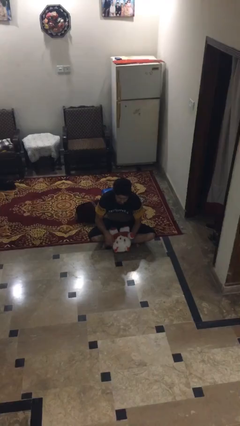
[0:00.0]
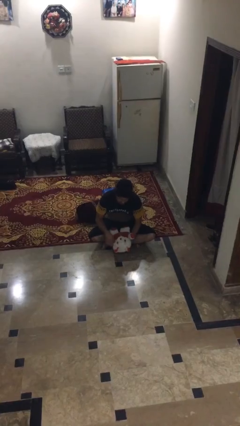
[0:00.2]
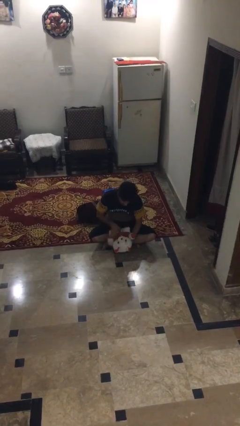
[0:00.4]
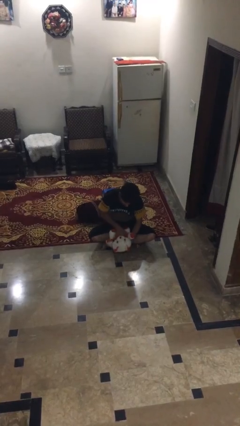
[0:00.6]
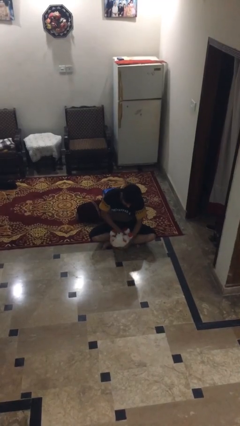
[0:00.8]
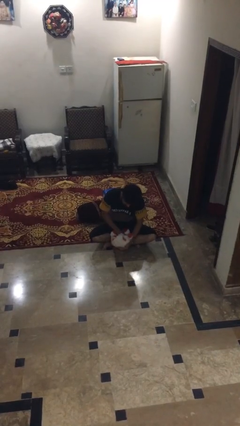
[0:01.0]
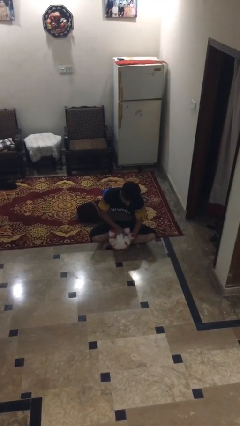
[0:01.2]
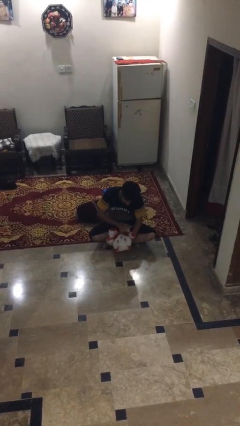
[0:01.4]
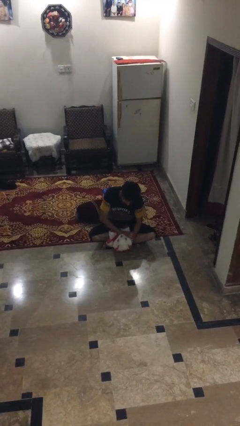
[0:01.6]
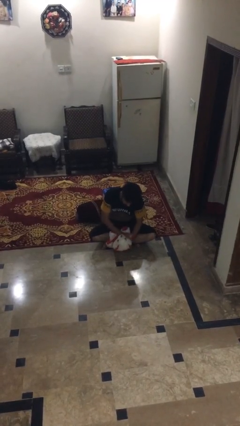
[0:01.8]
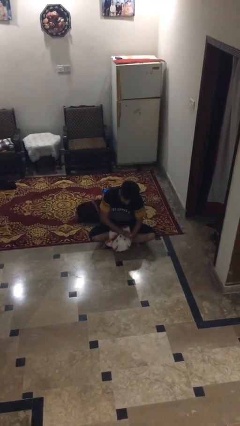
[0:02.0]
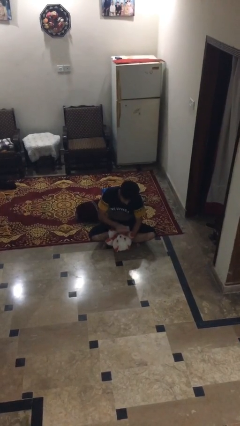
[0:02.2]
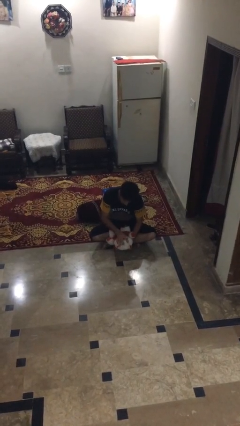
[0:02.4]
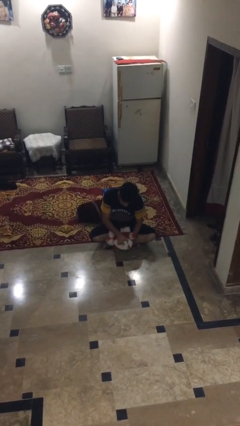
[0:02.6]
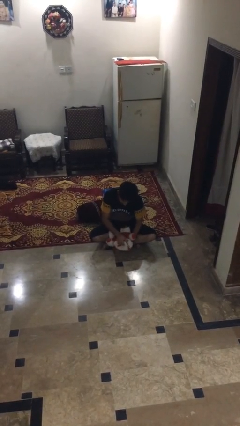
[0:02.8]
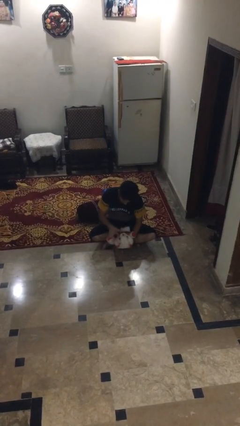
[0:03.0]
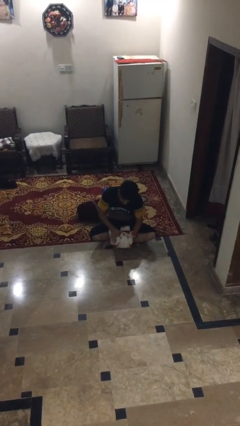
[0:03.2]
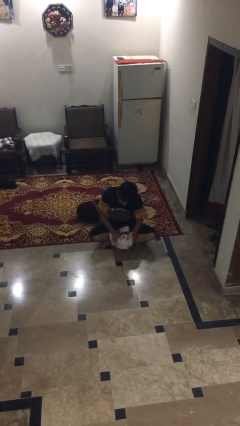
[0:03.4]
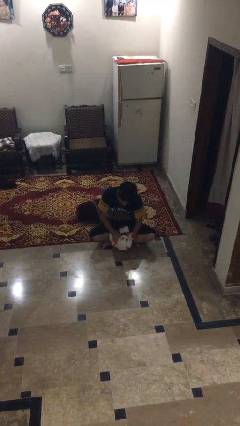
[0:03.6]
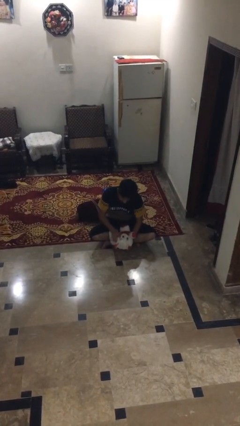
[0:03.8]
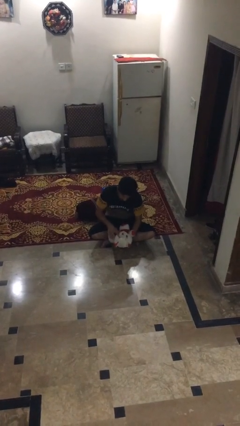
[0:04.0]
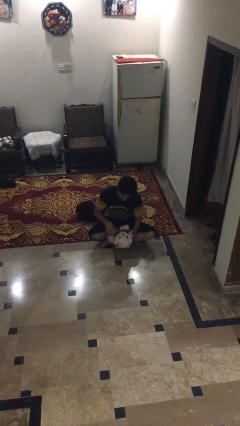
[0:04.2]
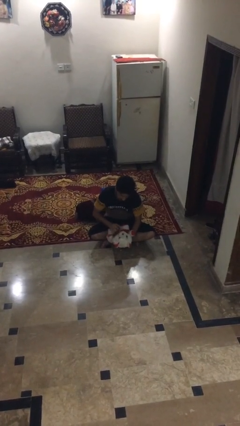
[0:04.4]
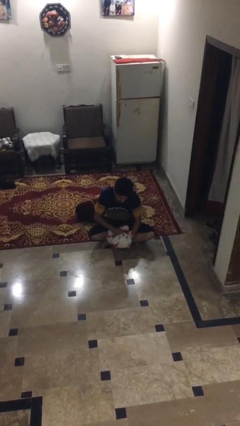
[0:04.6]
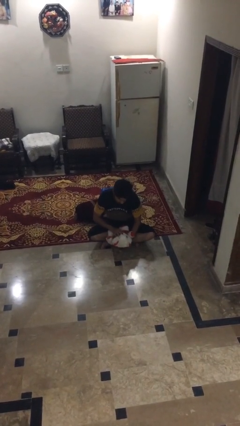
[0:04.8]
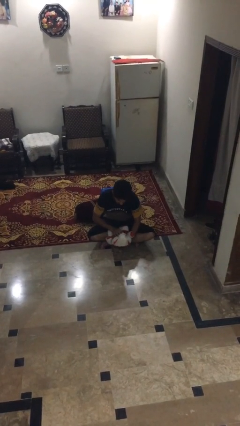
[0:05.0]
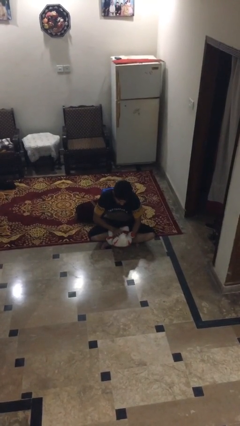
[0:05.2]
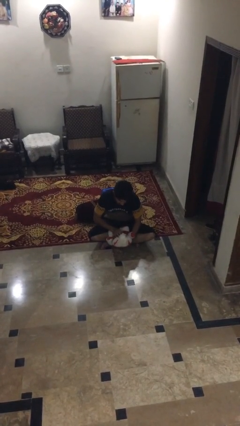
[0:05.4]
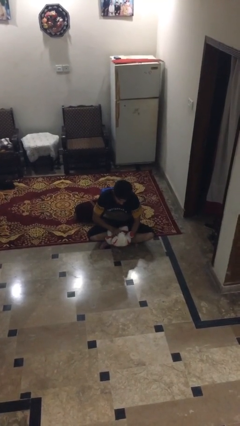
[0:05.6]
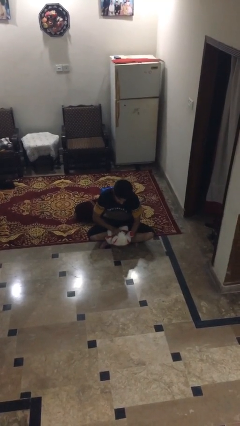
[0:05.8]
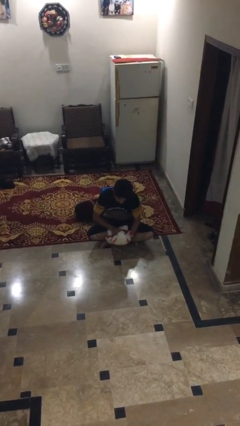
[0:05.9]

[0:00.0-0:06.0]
person squeezes object

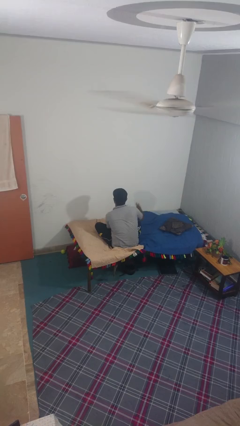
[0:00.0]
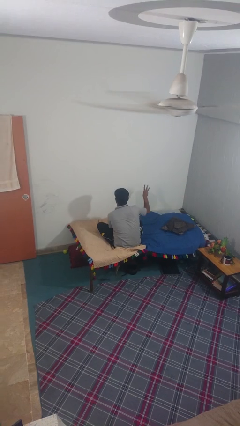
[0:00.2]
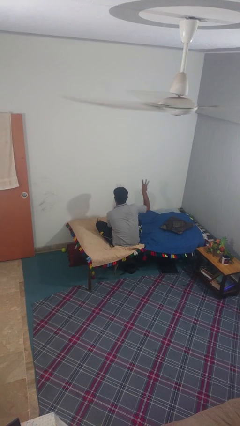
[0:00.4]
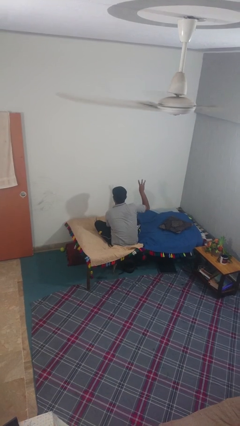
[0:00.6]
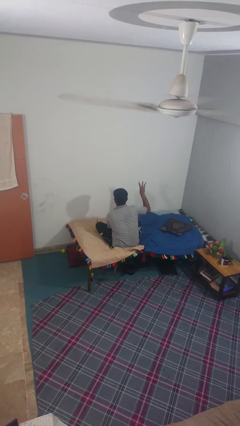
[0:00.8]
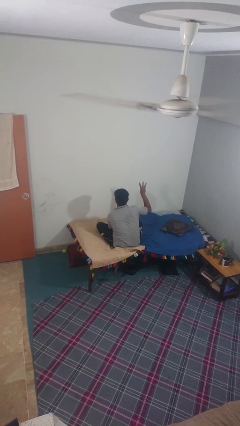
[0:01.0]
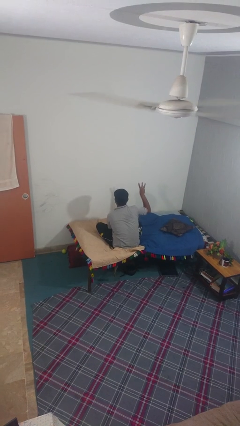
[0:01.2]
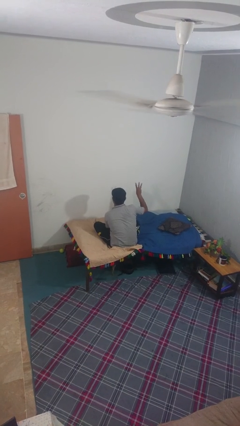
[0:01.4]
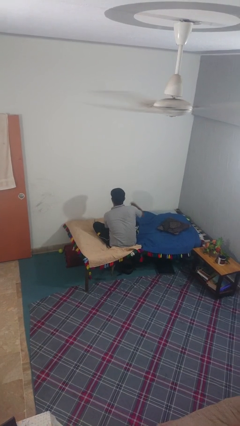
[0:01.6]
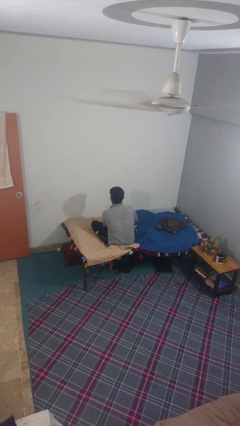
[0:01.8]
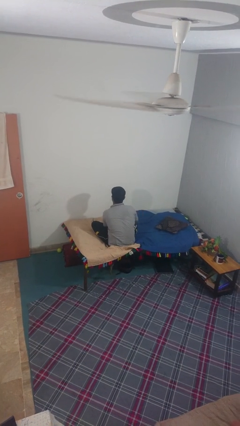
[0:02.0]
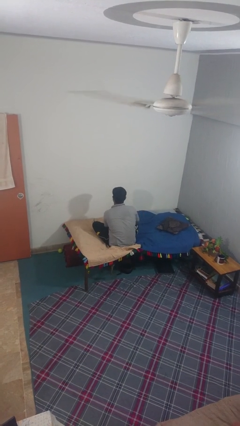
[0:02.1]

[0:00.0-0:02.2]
person gestures number three

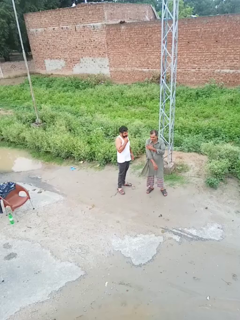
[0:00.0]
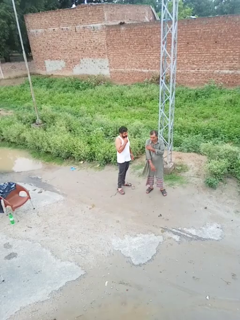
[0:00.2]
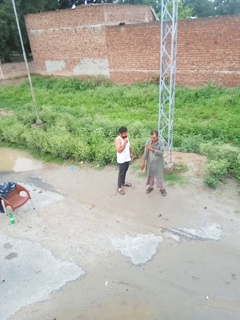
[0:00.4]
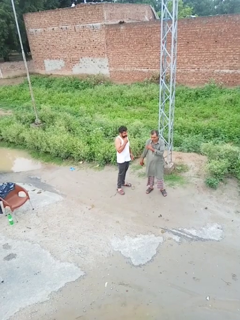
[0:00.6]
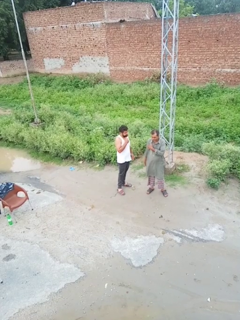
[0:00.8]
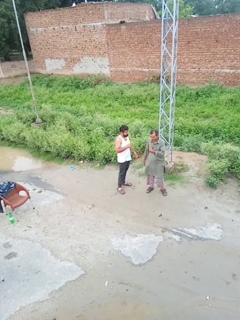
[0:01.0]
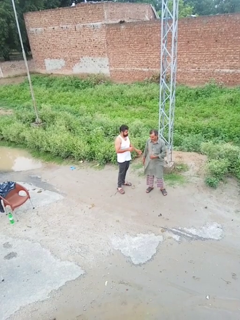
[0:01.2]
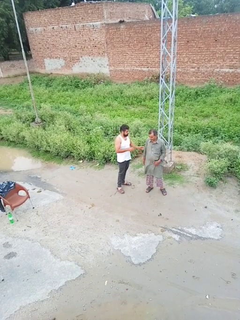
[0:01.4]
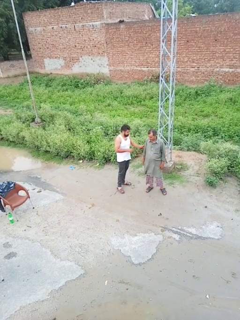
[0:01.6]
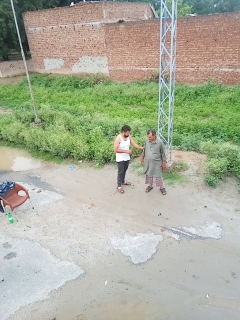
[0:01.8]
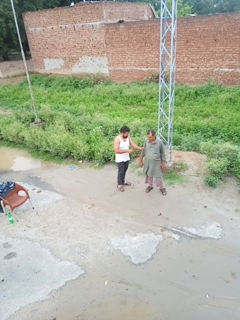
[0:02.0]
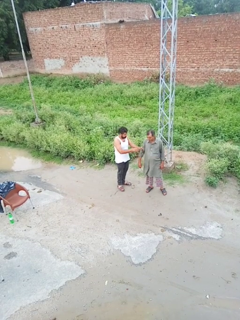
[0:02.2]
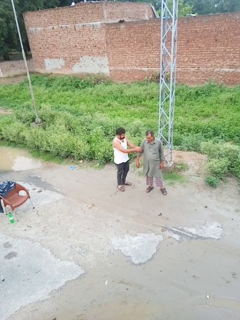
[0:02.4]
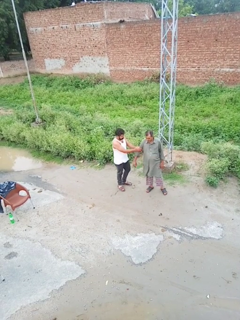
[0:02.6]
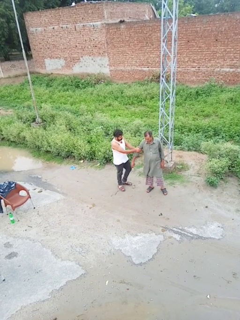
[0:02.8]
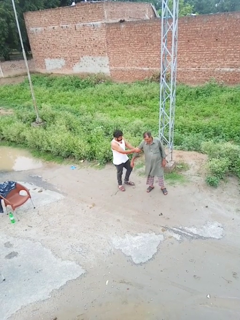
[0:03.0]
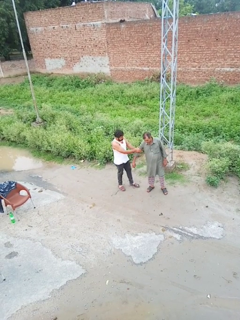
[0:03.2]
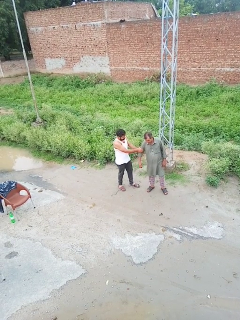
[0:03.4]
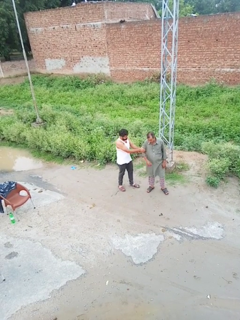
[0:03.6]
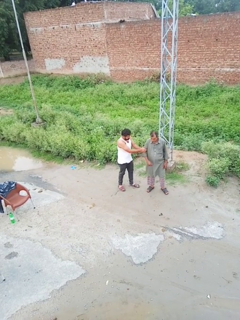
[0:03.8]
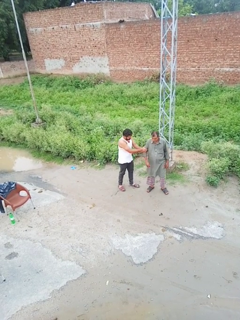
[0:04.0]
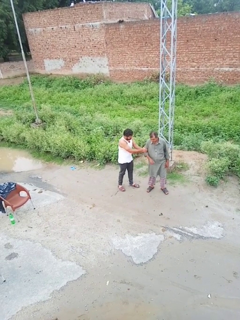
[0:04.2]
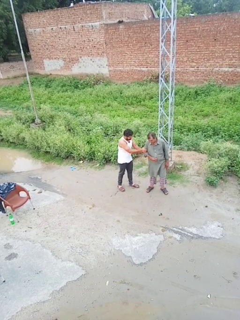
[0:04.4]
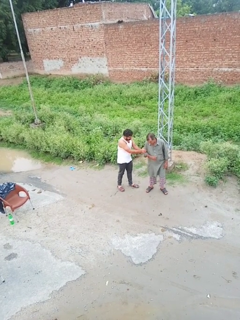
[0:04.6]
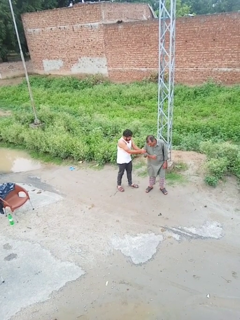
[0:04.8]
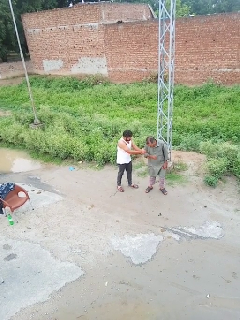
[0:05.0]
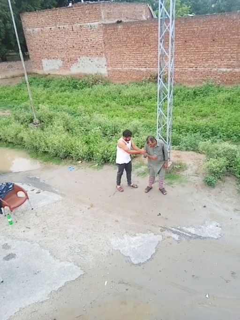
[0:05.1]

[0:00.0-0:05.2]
person grabs person by forearm

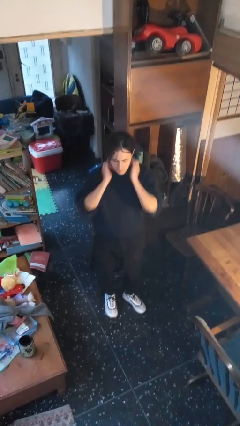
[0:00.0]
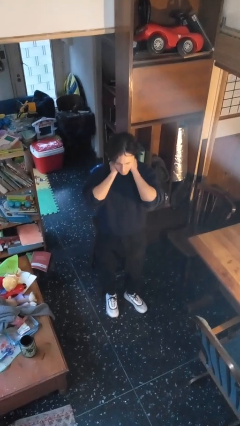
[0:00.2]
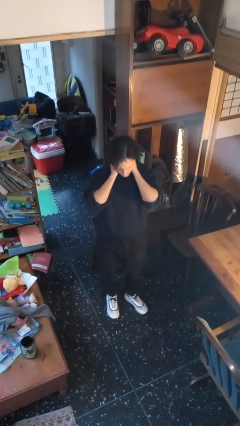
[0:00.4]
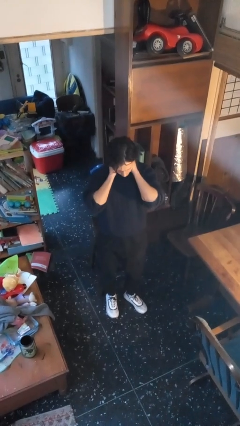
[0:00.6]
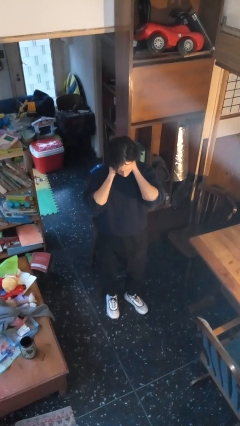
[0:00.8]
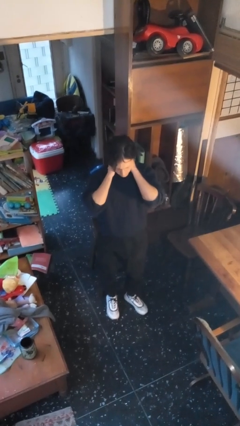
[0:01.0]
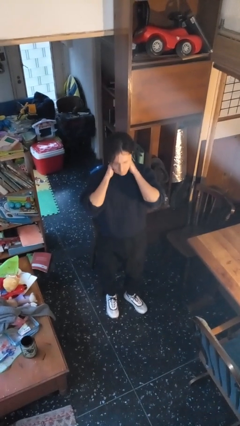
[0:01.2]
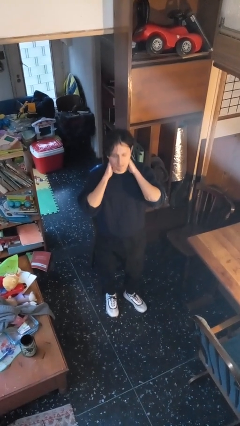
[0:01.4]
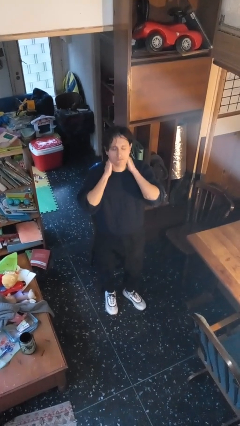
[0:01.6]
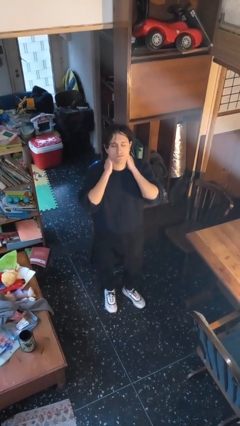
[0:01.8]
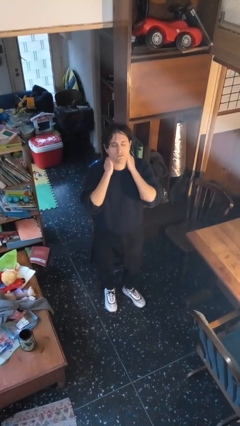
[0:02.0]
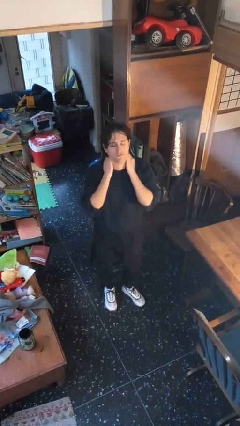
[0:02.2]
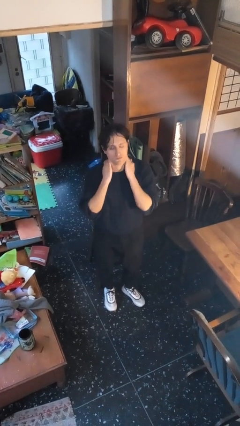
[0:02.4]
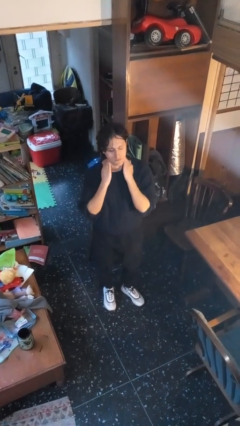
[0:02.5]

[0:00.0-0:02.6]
person rubs neck

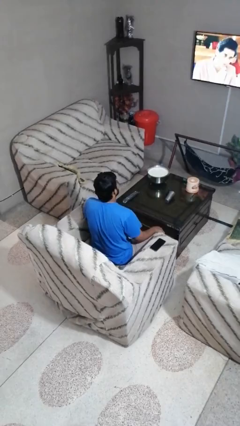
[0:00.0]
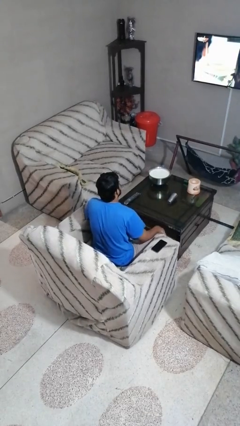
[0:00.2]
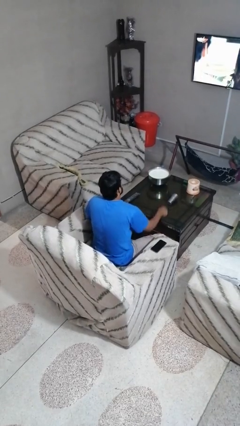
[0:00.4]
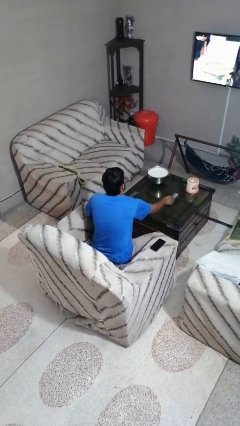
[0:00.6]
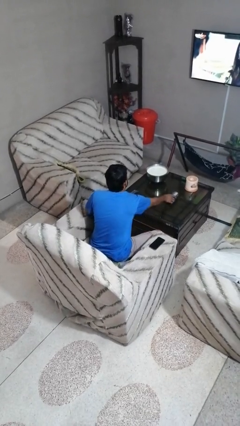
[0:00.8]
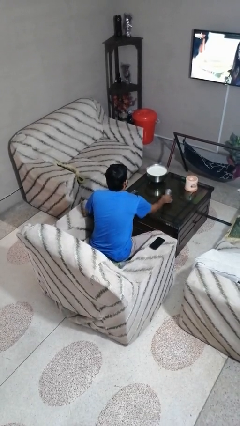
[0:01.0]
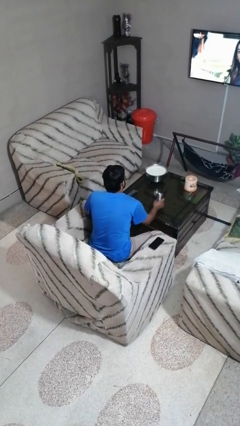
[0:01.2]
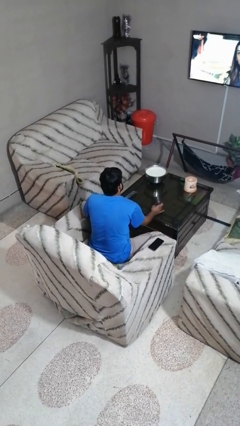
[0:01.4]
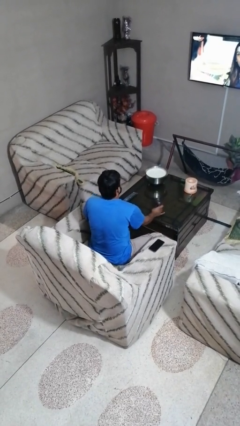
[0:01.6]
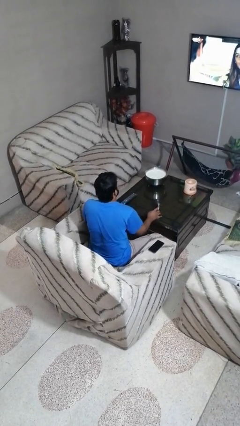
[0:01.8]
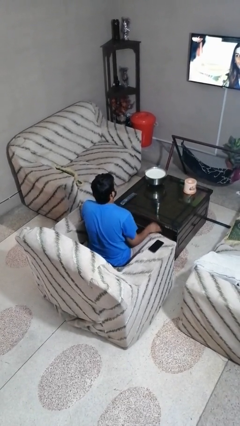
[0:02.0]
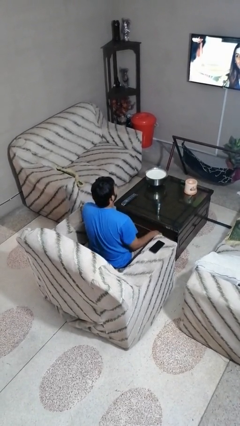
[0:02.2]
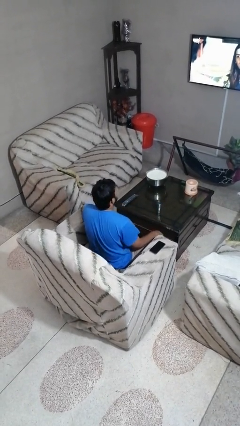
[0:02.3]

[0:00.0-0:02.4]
person sets upright glass
